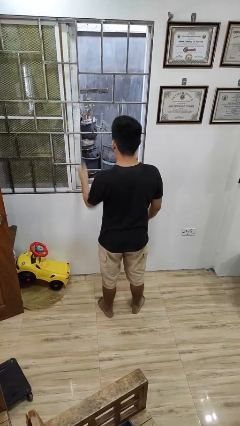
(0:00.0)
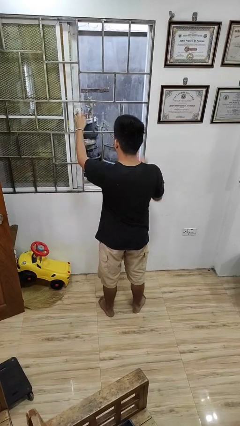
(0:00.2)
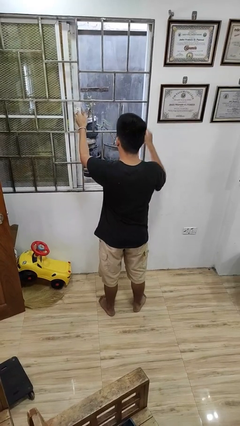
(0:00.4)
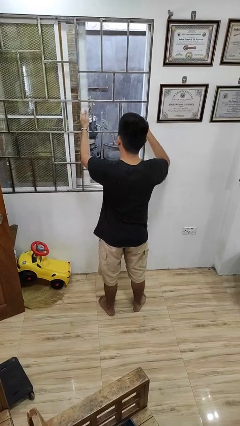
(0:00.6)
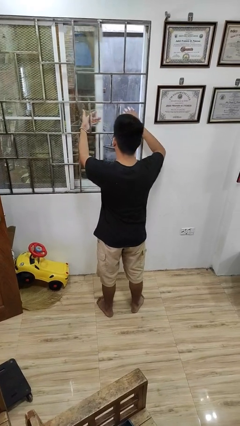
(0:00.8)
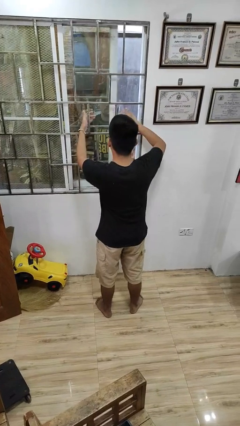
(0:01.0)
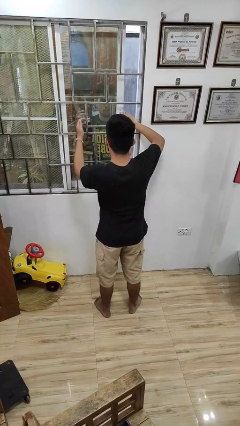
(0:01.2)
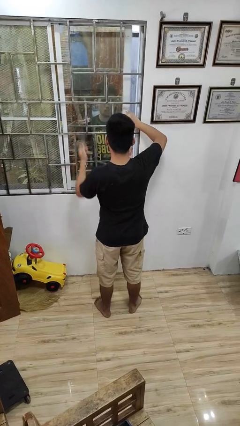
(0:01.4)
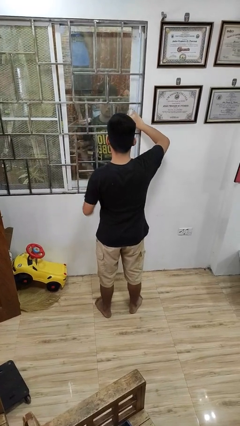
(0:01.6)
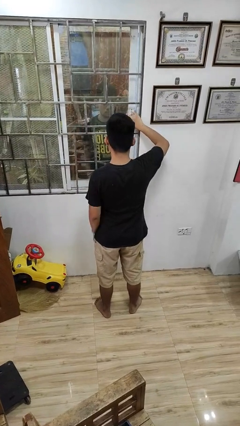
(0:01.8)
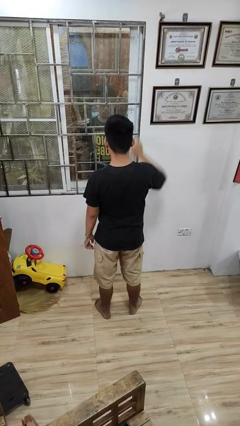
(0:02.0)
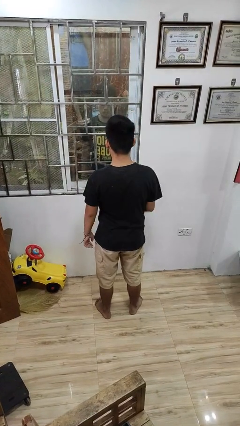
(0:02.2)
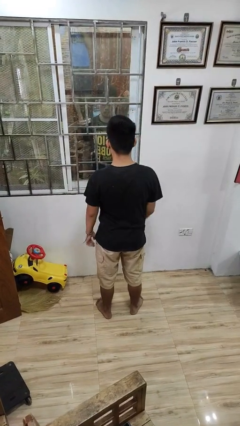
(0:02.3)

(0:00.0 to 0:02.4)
person closes home window

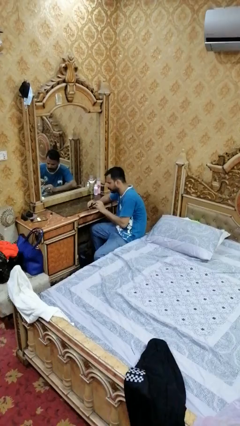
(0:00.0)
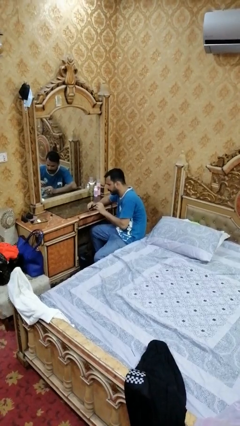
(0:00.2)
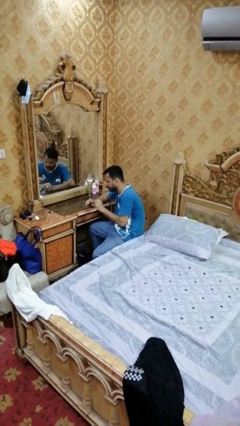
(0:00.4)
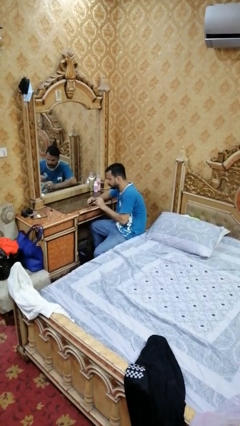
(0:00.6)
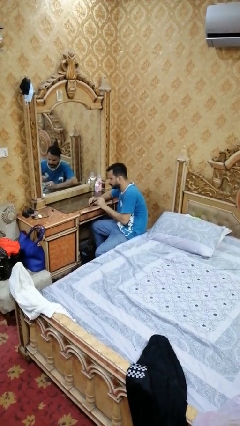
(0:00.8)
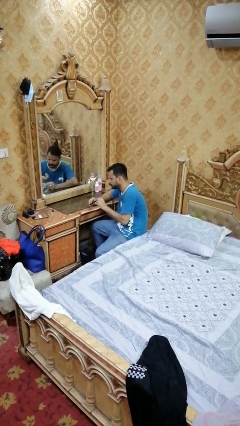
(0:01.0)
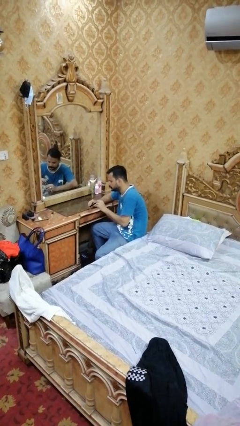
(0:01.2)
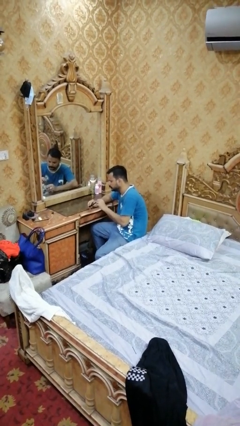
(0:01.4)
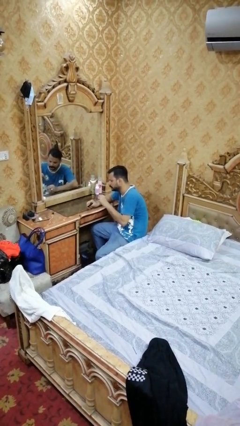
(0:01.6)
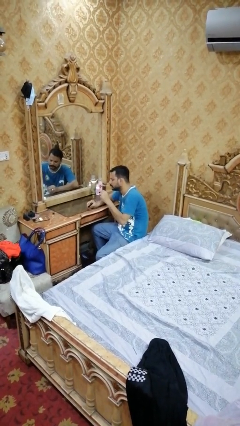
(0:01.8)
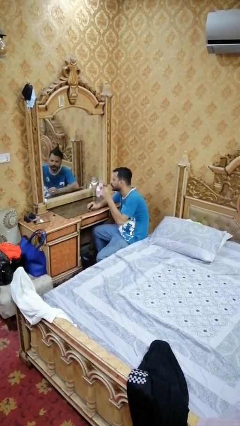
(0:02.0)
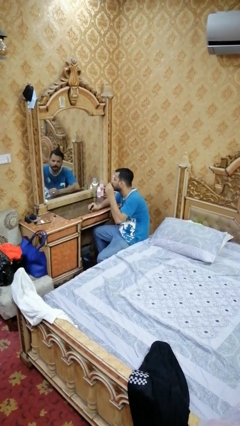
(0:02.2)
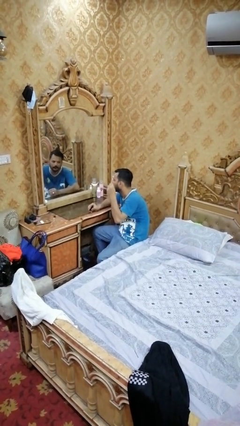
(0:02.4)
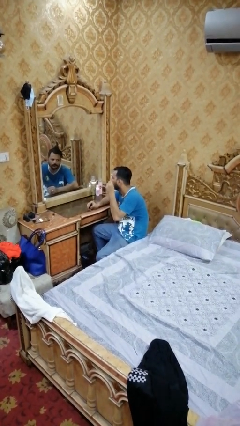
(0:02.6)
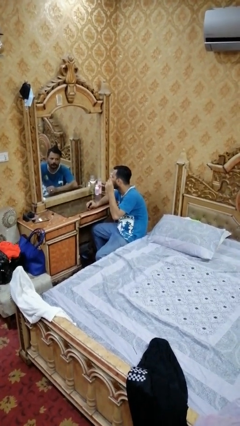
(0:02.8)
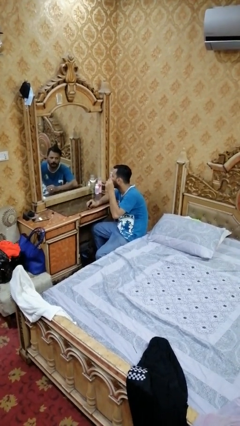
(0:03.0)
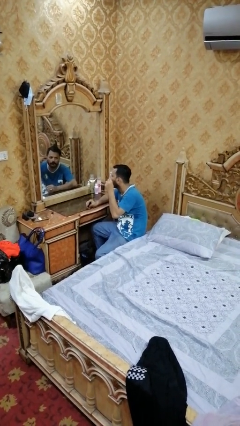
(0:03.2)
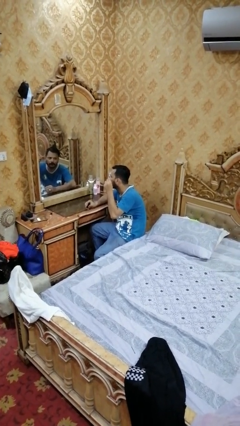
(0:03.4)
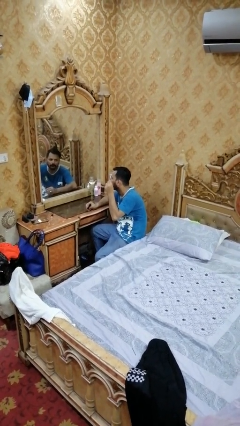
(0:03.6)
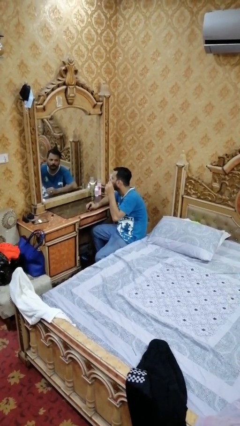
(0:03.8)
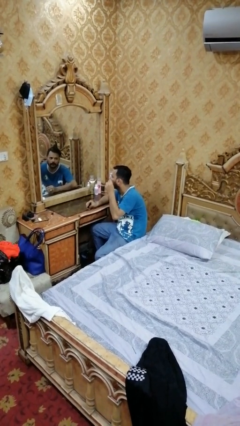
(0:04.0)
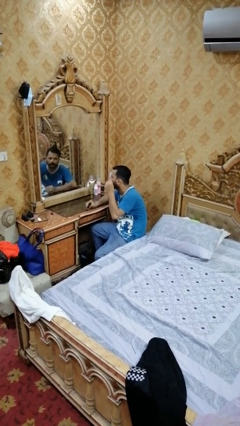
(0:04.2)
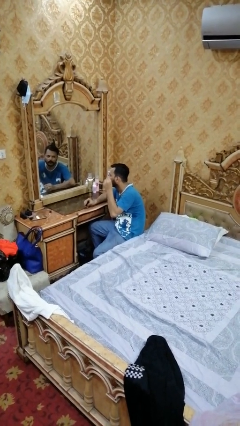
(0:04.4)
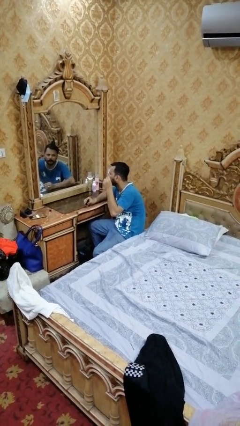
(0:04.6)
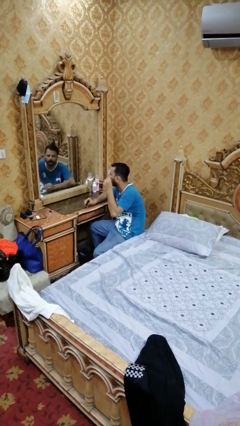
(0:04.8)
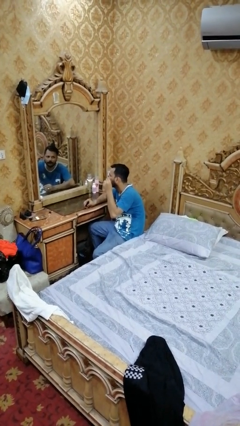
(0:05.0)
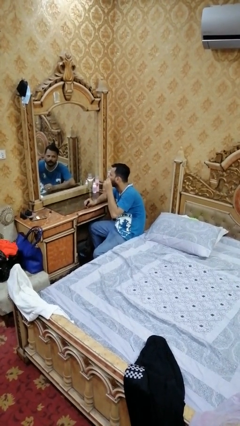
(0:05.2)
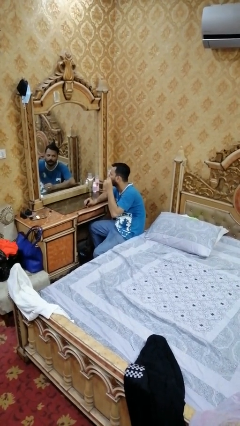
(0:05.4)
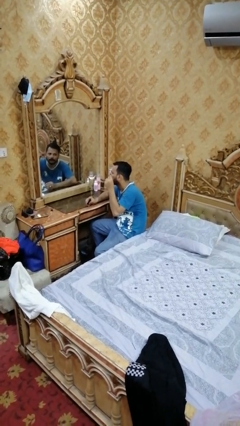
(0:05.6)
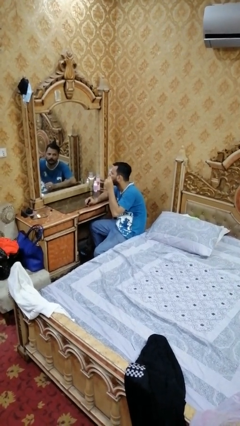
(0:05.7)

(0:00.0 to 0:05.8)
person applies eye makeup

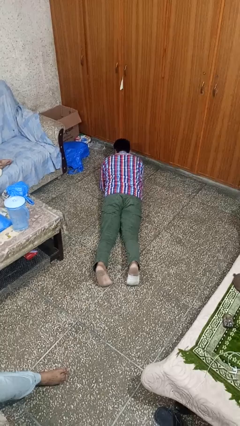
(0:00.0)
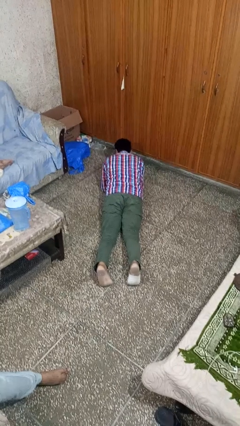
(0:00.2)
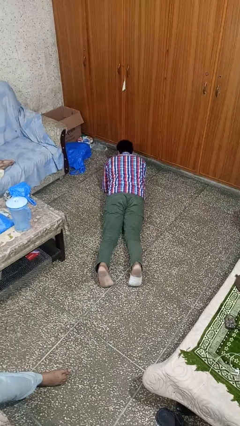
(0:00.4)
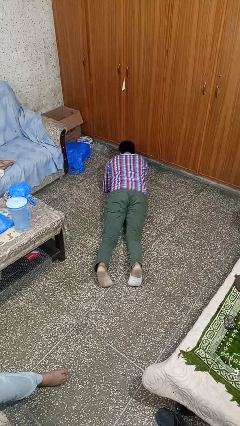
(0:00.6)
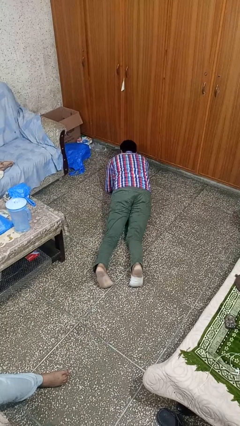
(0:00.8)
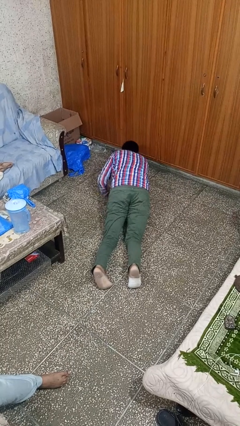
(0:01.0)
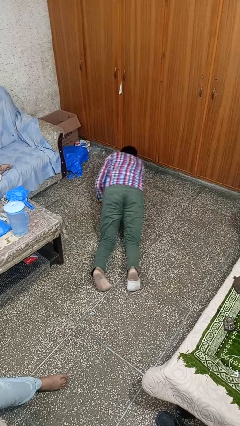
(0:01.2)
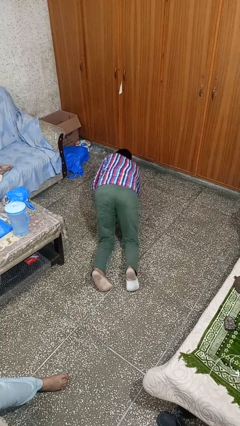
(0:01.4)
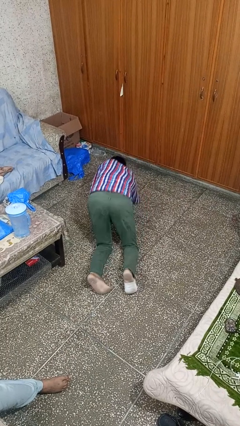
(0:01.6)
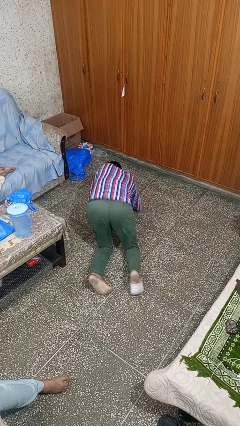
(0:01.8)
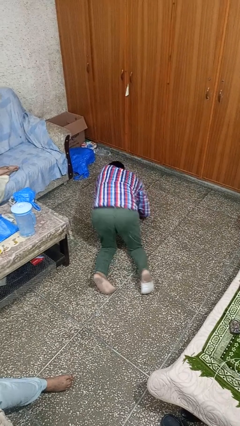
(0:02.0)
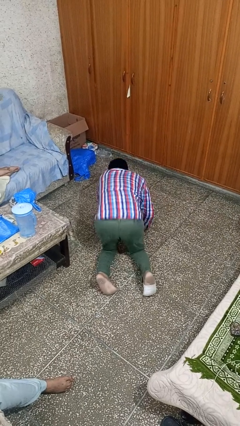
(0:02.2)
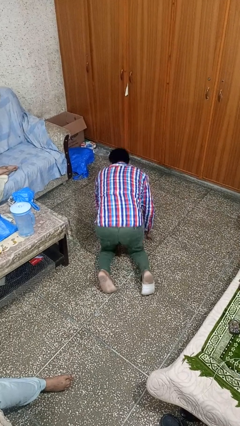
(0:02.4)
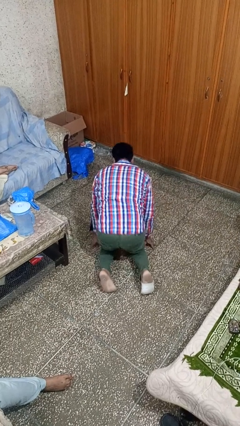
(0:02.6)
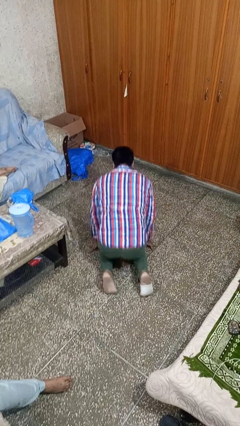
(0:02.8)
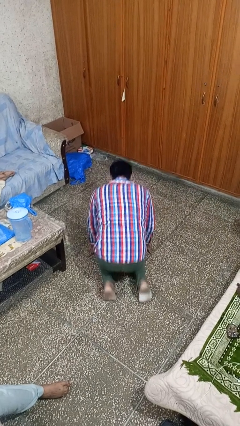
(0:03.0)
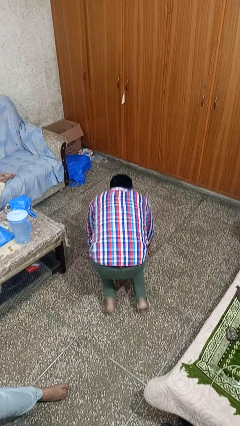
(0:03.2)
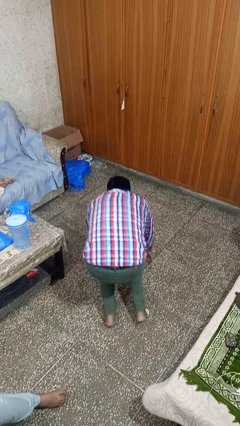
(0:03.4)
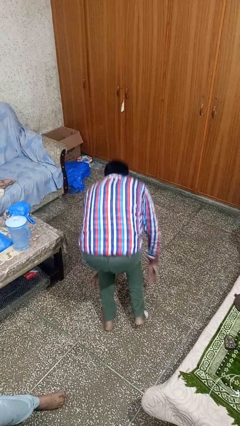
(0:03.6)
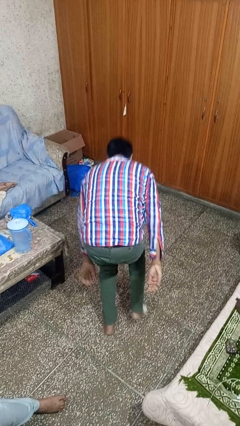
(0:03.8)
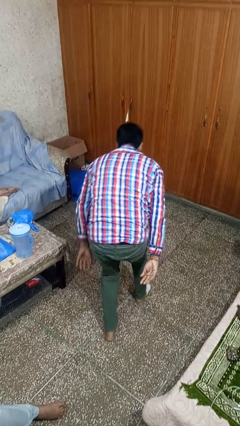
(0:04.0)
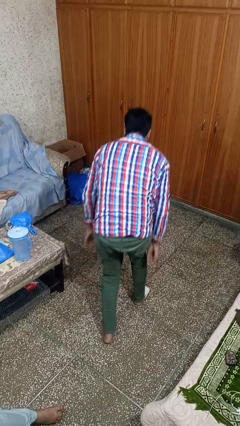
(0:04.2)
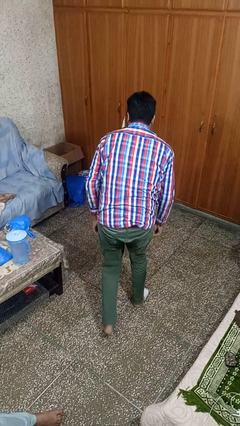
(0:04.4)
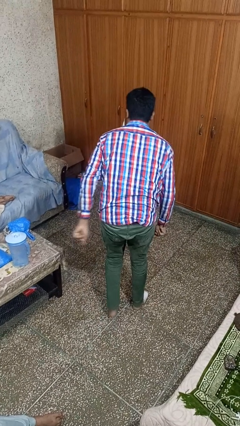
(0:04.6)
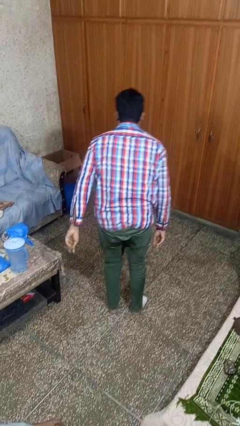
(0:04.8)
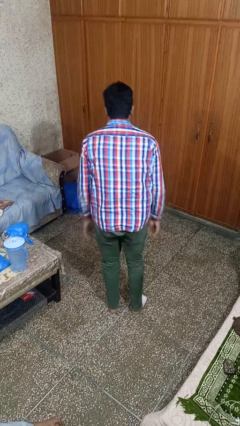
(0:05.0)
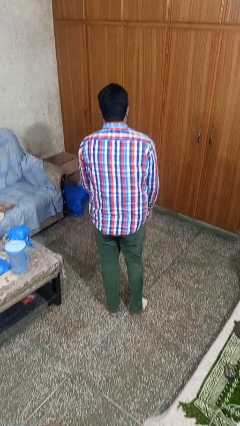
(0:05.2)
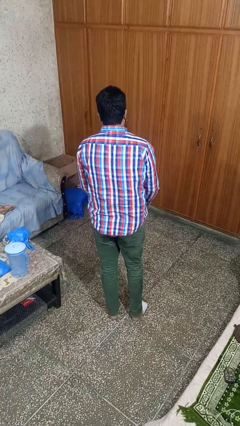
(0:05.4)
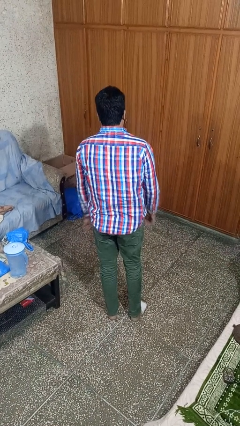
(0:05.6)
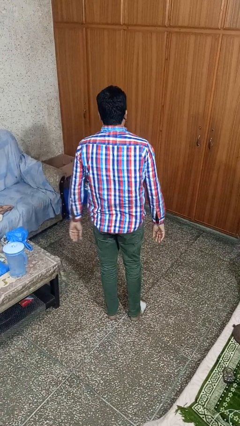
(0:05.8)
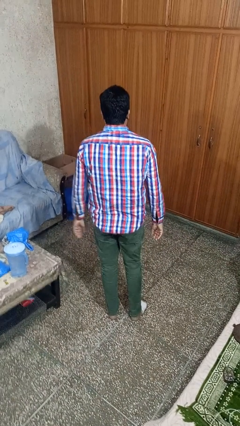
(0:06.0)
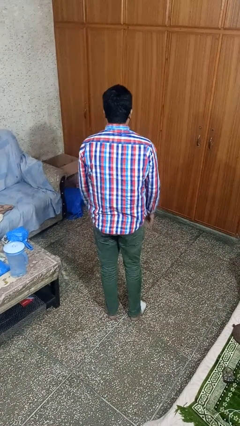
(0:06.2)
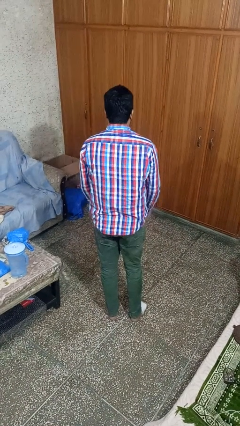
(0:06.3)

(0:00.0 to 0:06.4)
person stands up from floor

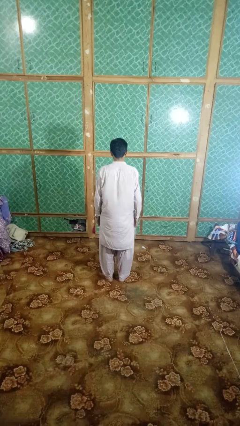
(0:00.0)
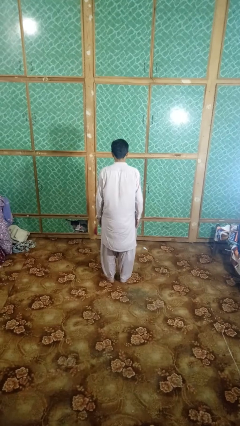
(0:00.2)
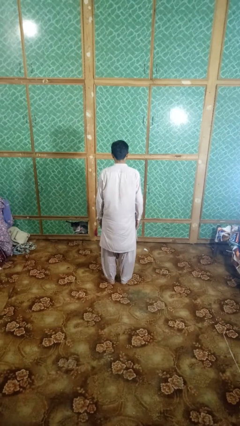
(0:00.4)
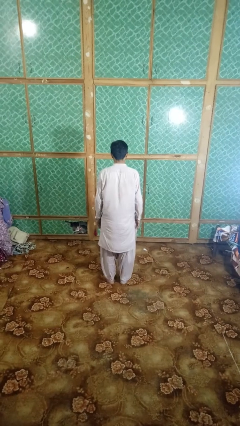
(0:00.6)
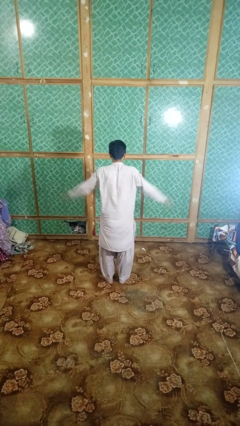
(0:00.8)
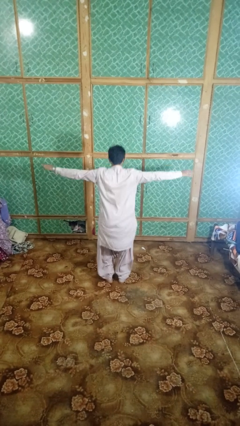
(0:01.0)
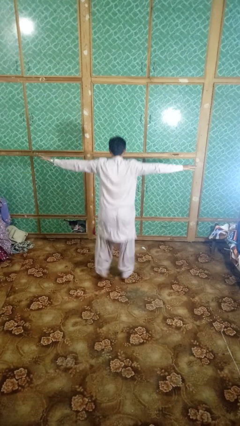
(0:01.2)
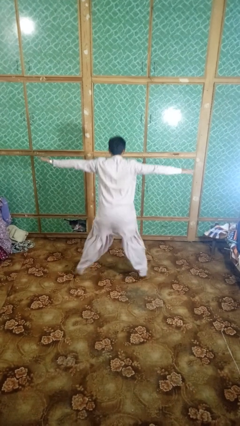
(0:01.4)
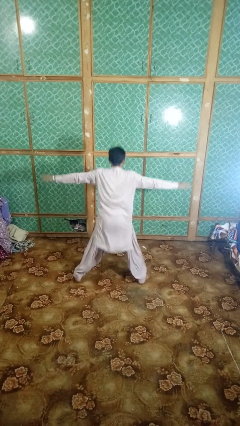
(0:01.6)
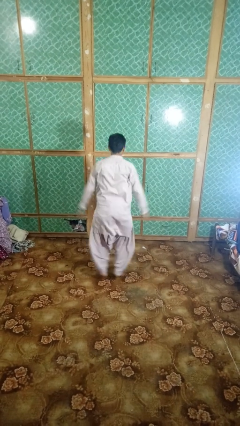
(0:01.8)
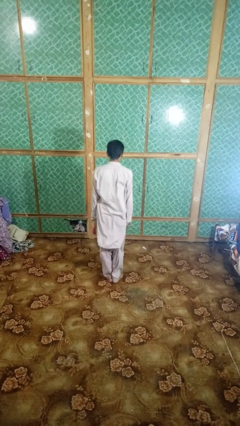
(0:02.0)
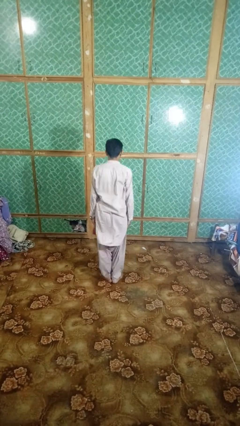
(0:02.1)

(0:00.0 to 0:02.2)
person exercises with jumping jacks

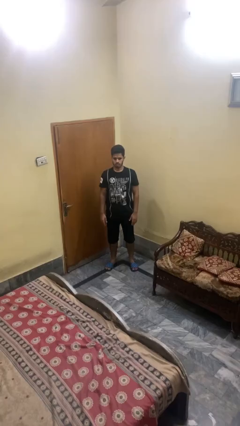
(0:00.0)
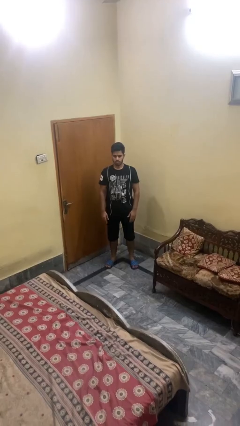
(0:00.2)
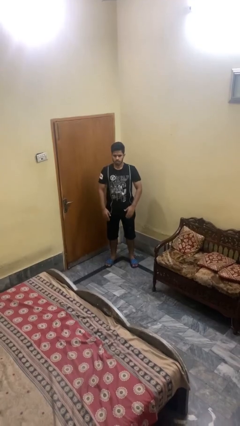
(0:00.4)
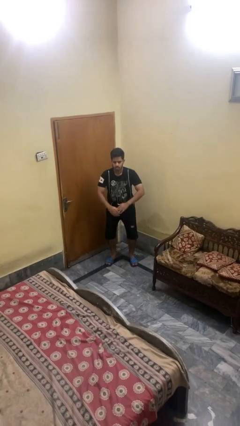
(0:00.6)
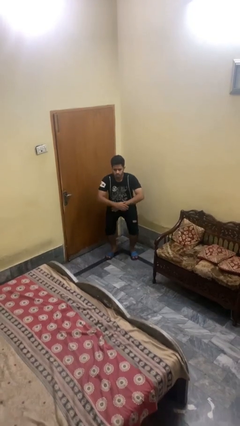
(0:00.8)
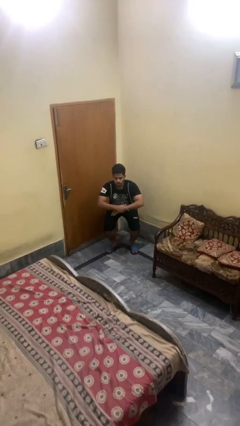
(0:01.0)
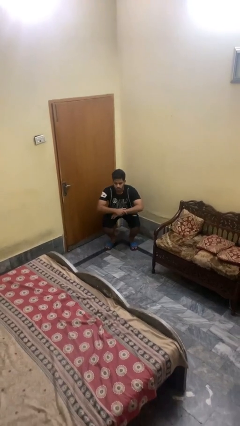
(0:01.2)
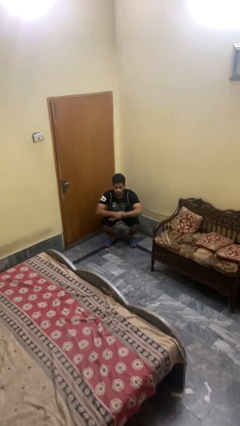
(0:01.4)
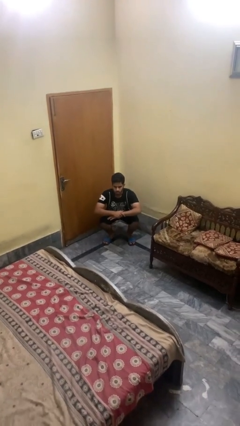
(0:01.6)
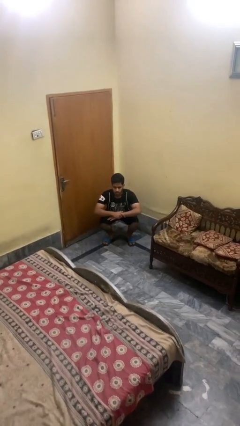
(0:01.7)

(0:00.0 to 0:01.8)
person squats
